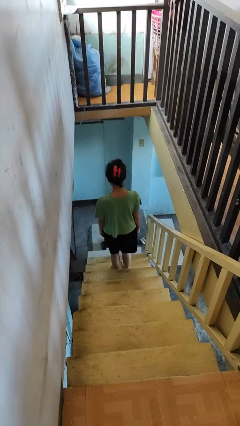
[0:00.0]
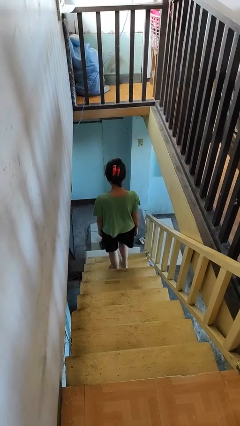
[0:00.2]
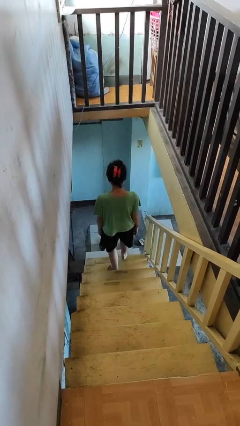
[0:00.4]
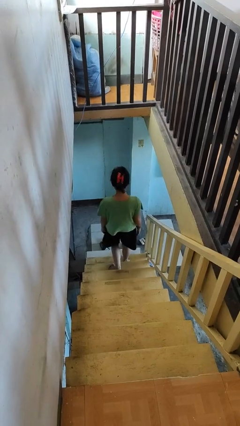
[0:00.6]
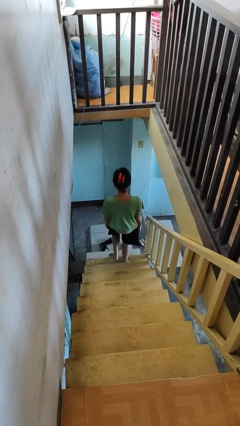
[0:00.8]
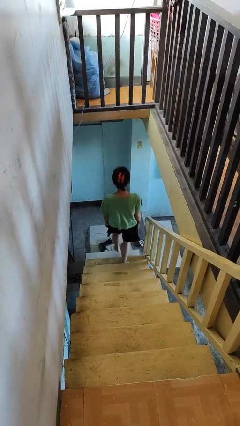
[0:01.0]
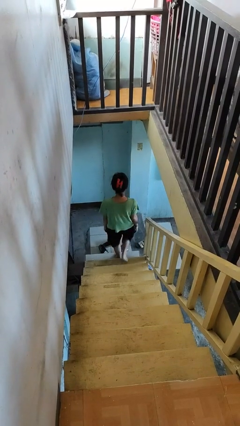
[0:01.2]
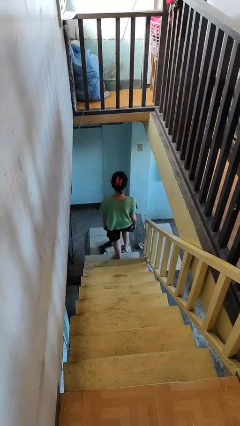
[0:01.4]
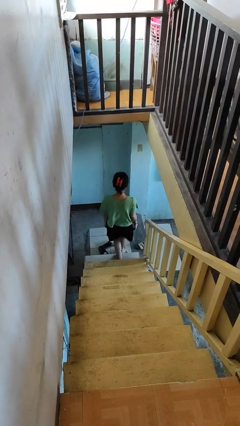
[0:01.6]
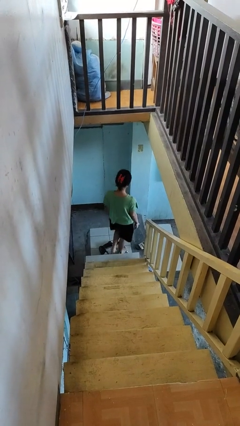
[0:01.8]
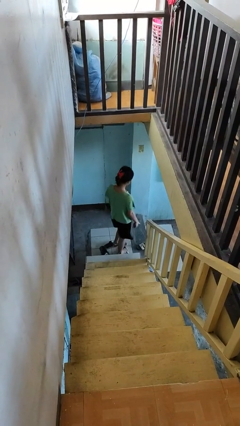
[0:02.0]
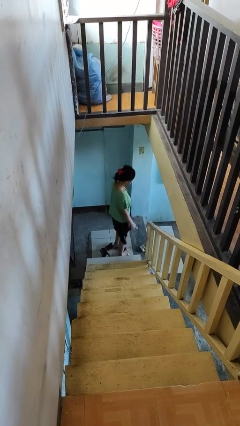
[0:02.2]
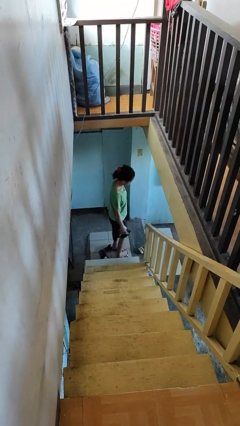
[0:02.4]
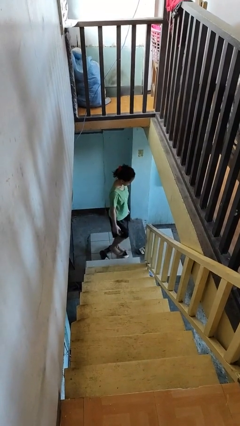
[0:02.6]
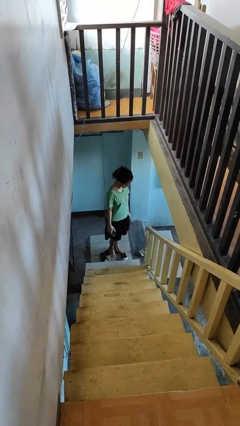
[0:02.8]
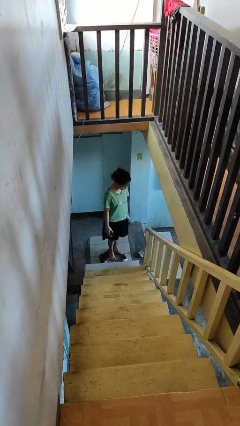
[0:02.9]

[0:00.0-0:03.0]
person climbs down stairs

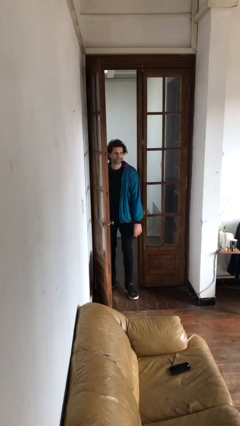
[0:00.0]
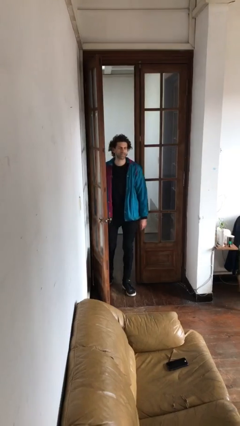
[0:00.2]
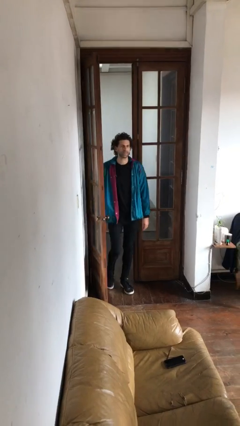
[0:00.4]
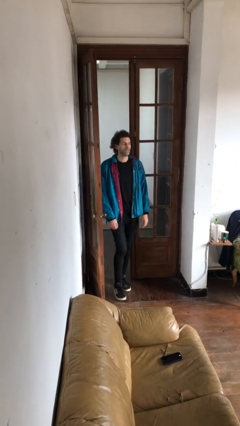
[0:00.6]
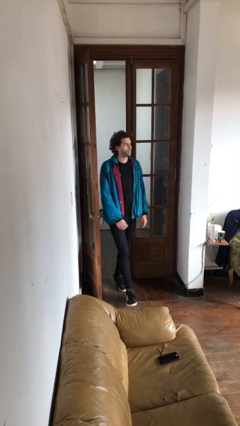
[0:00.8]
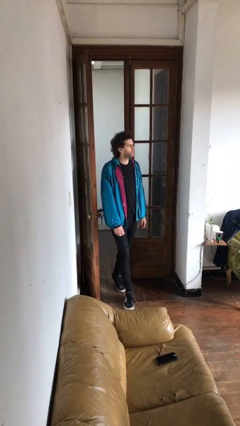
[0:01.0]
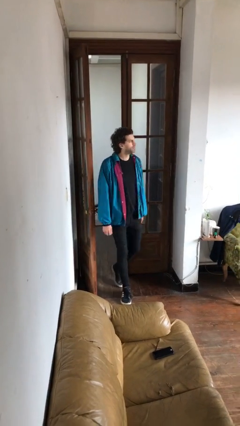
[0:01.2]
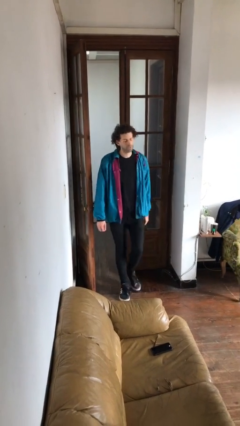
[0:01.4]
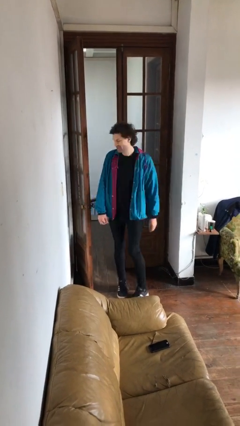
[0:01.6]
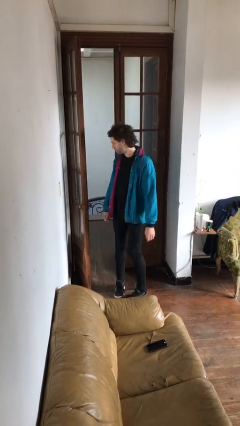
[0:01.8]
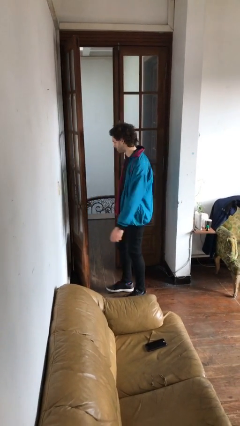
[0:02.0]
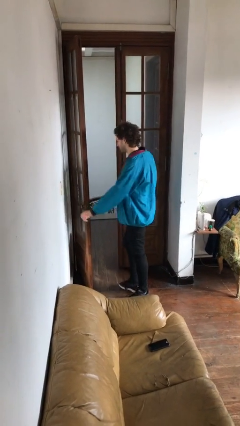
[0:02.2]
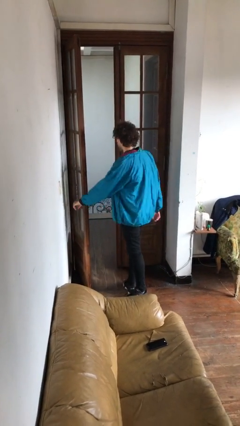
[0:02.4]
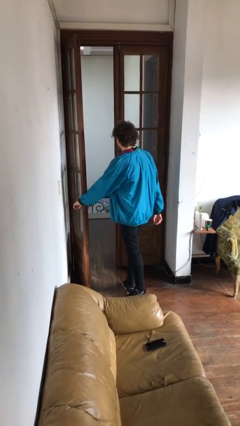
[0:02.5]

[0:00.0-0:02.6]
person enters scene through structure

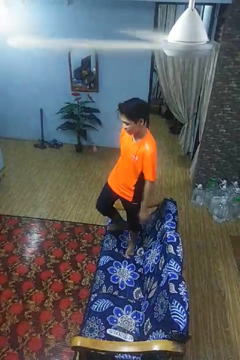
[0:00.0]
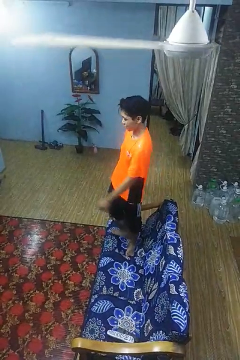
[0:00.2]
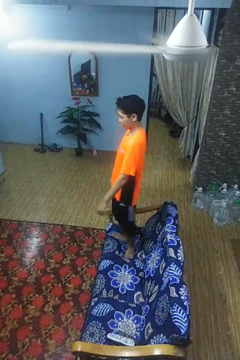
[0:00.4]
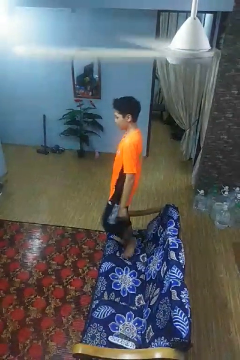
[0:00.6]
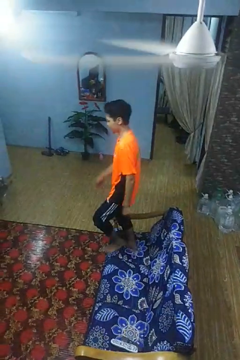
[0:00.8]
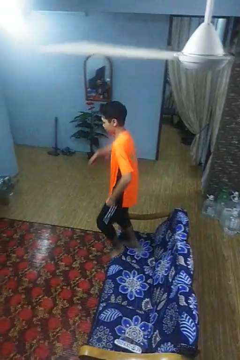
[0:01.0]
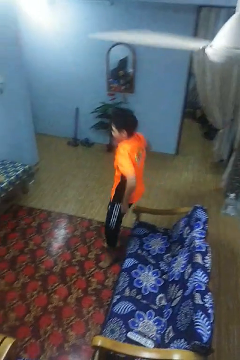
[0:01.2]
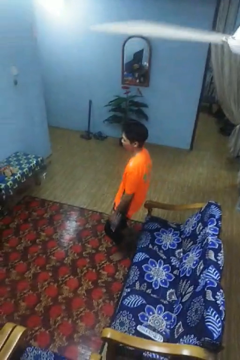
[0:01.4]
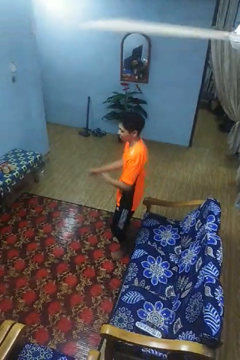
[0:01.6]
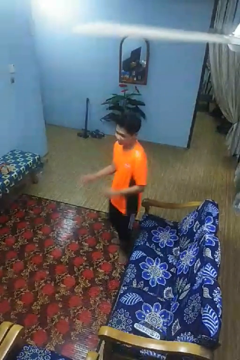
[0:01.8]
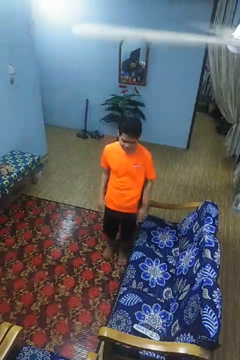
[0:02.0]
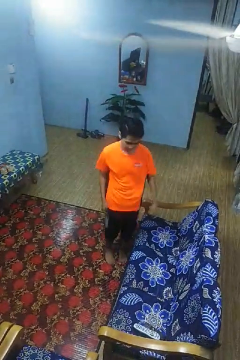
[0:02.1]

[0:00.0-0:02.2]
person jumps on couch

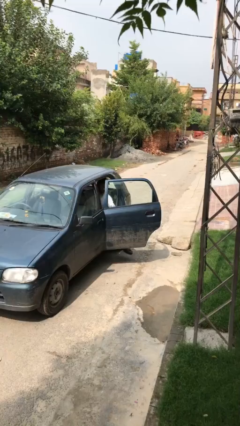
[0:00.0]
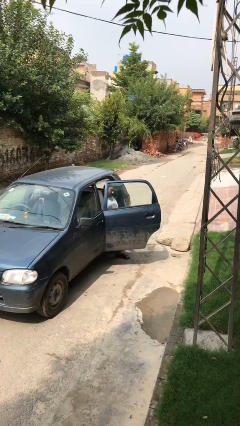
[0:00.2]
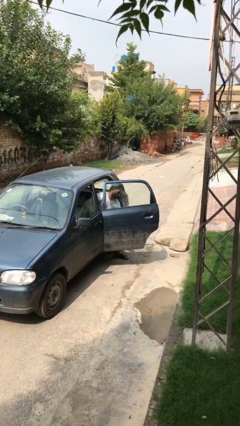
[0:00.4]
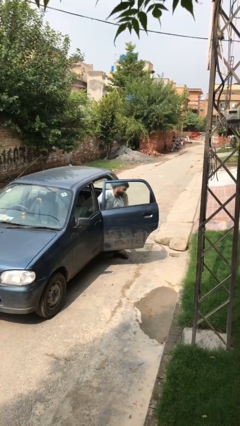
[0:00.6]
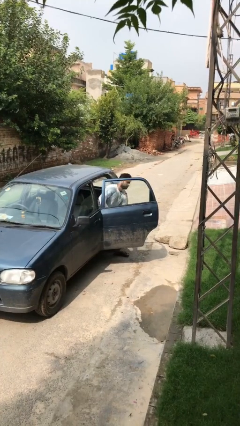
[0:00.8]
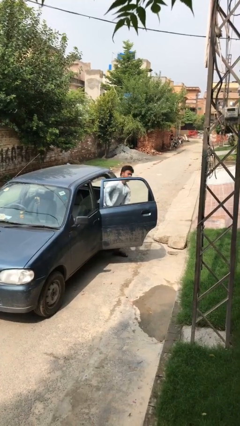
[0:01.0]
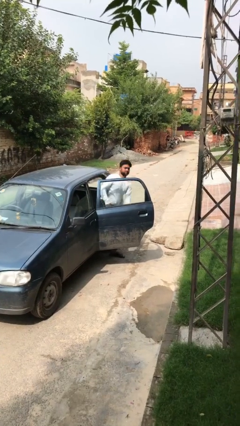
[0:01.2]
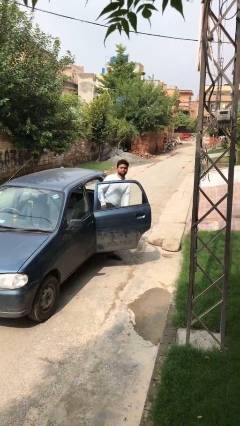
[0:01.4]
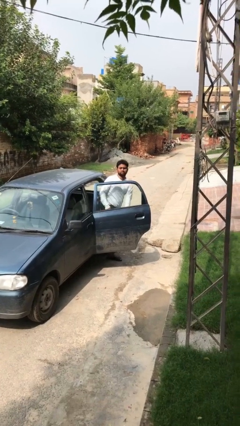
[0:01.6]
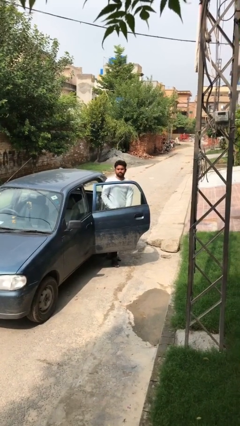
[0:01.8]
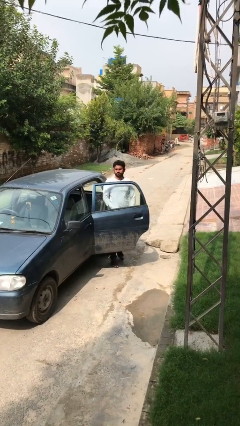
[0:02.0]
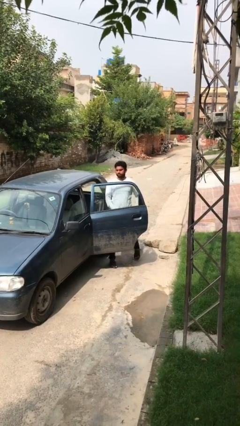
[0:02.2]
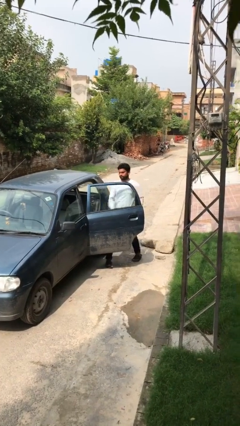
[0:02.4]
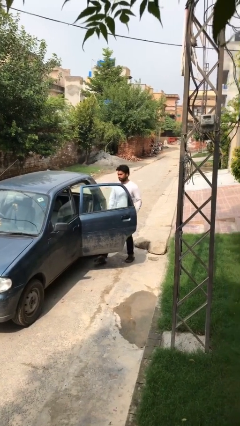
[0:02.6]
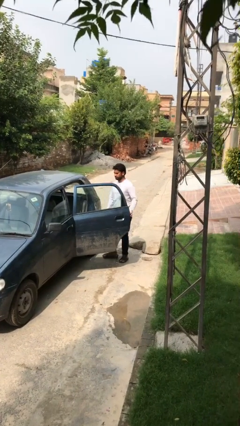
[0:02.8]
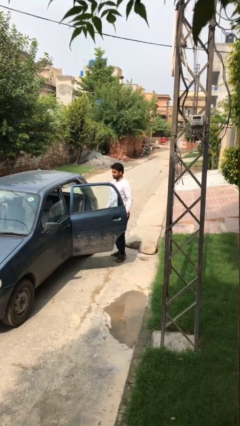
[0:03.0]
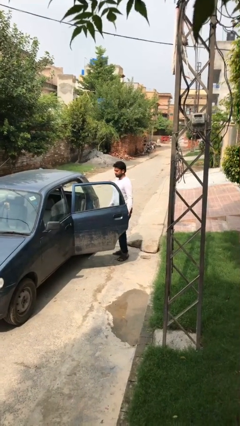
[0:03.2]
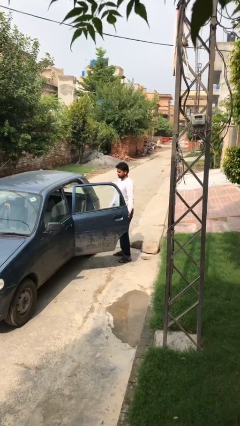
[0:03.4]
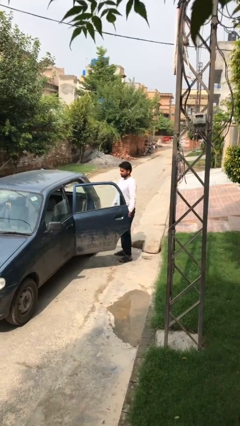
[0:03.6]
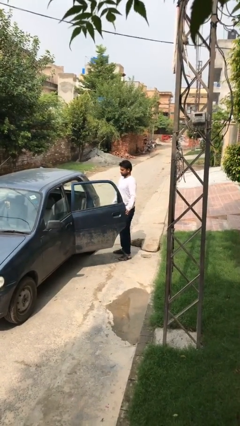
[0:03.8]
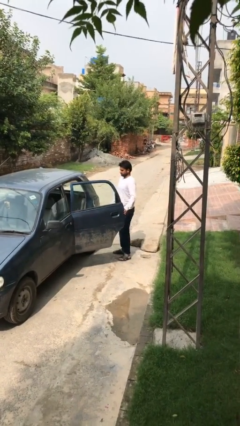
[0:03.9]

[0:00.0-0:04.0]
person exits car

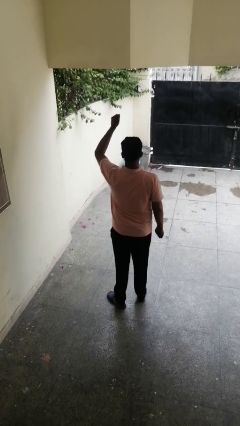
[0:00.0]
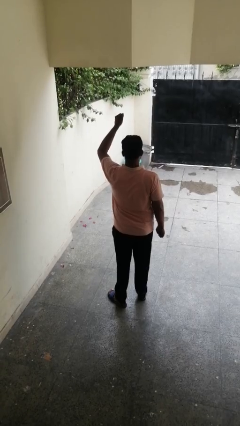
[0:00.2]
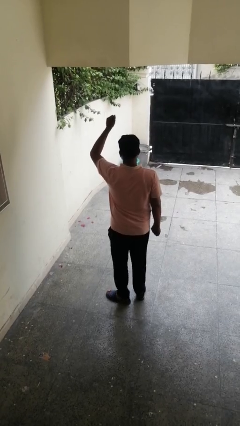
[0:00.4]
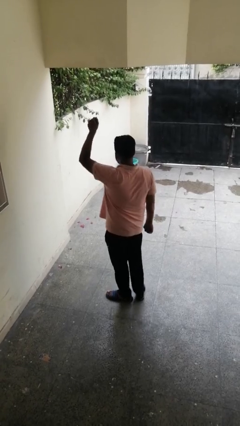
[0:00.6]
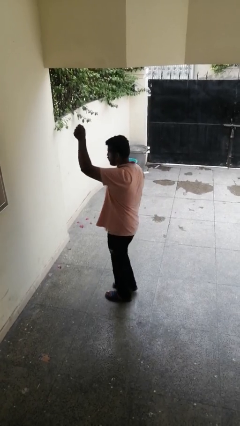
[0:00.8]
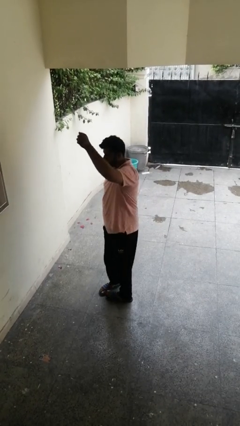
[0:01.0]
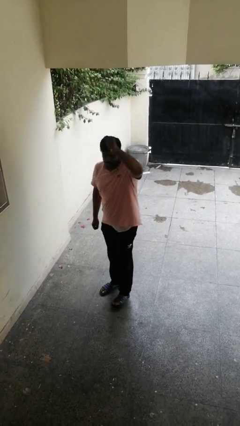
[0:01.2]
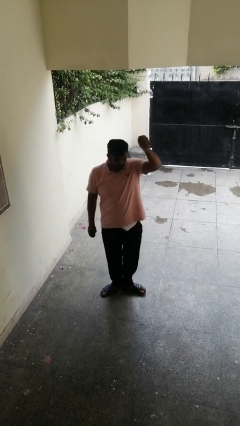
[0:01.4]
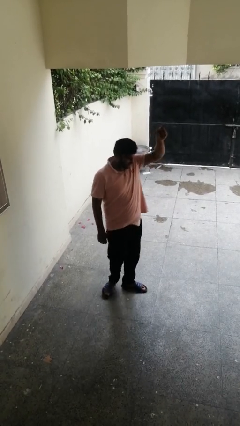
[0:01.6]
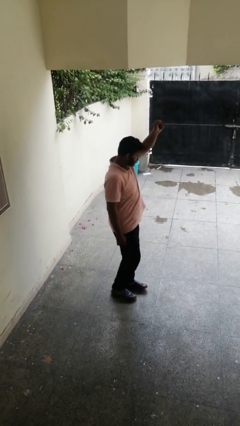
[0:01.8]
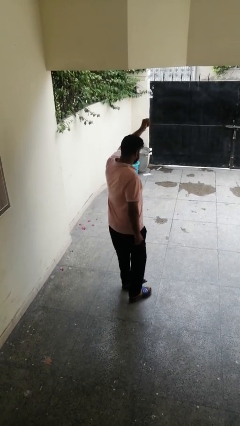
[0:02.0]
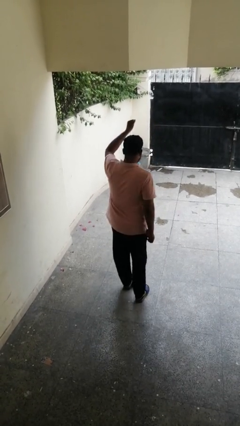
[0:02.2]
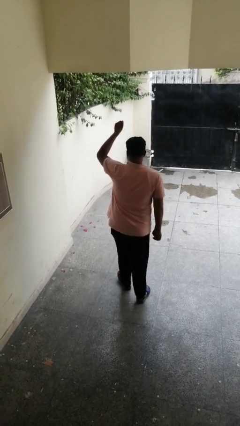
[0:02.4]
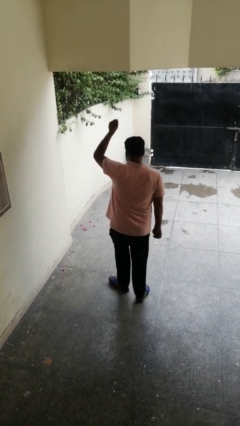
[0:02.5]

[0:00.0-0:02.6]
person twirls

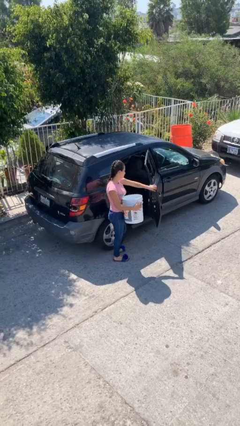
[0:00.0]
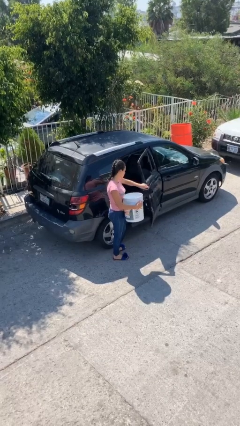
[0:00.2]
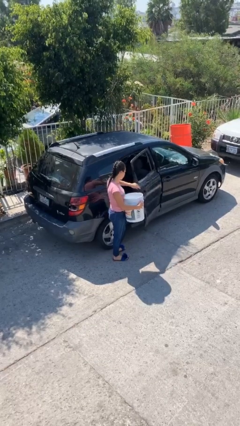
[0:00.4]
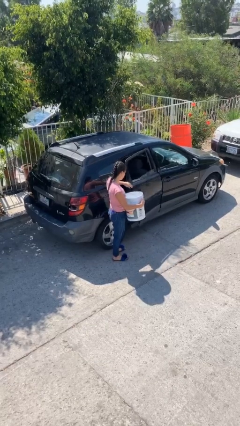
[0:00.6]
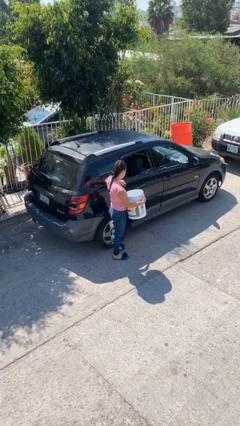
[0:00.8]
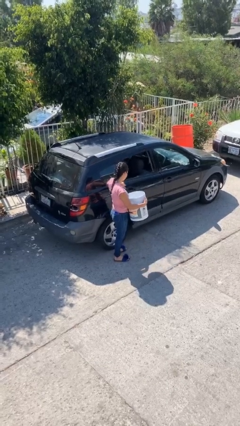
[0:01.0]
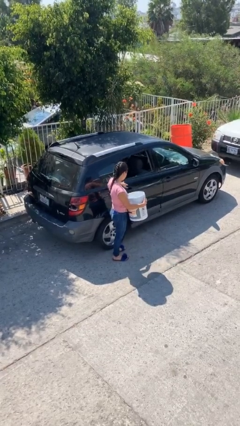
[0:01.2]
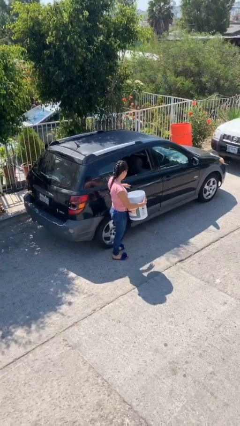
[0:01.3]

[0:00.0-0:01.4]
person closes car door

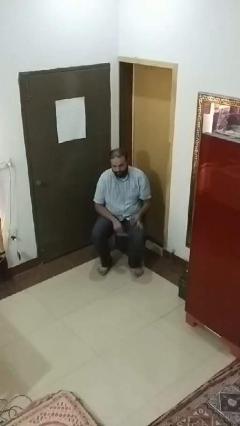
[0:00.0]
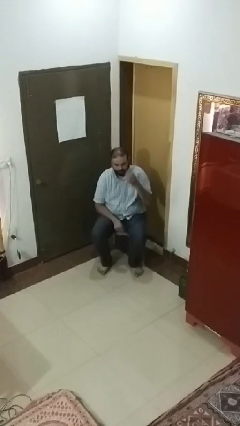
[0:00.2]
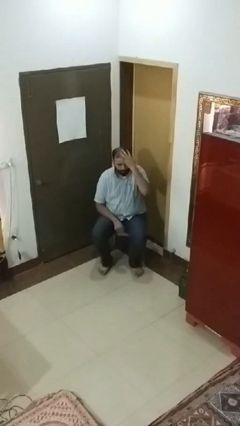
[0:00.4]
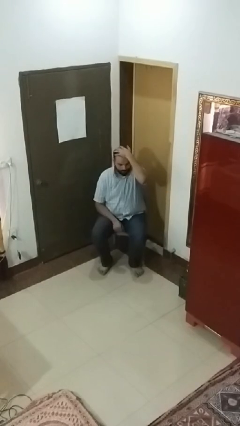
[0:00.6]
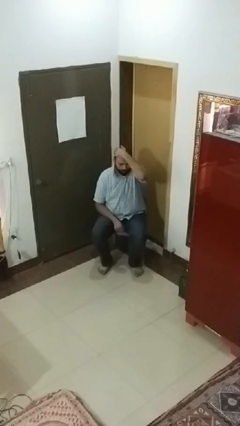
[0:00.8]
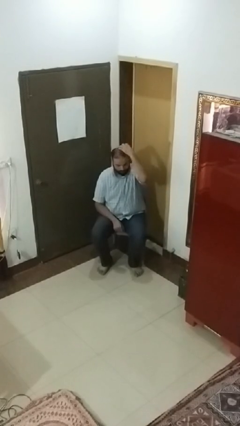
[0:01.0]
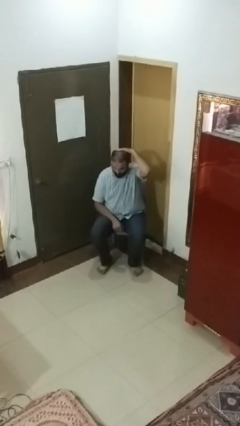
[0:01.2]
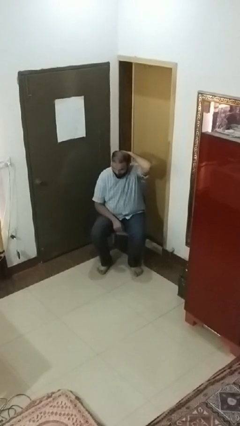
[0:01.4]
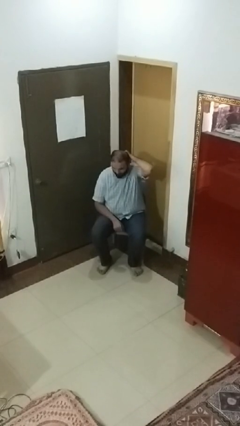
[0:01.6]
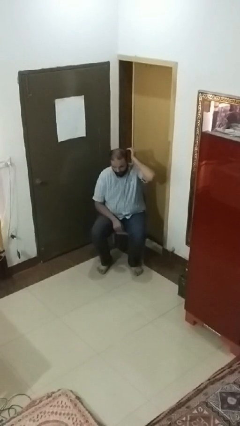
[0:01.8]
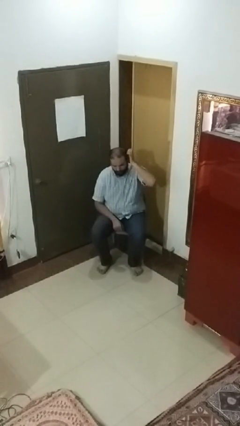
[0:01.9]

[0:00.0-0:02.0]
person strokes hair
